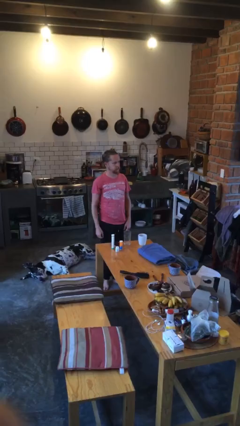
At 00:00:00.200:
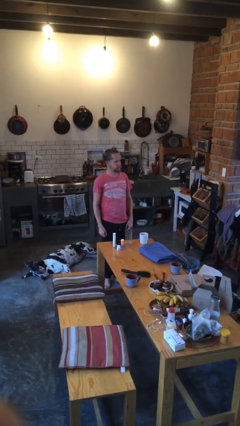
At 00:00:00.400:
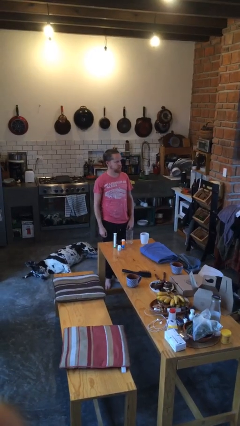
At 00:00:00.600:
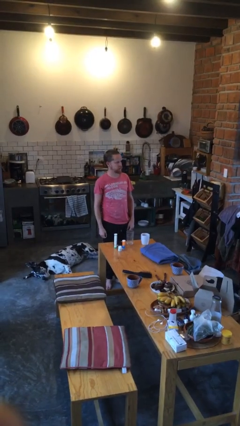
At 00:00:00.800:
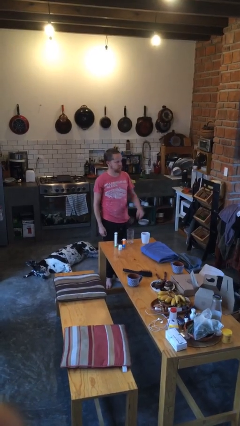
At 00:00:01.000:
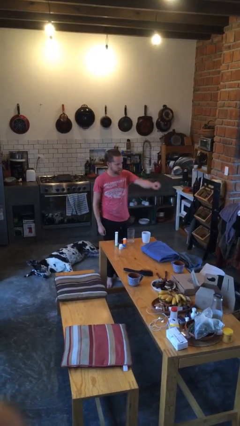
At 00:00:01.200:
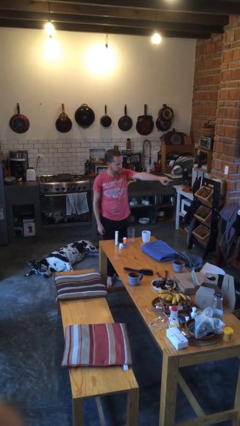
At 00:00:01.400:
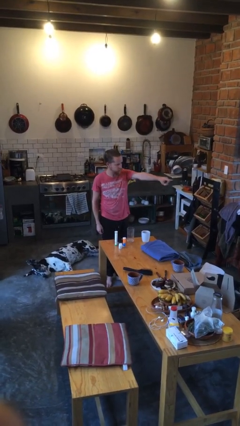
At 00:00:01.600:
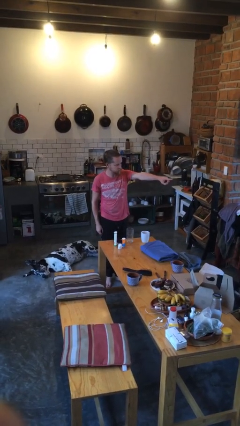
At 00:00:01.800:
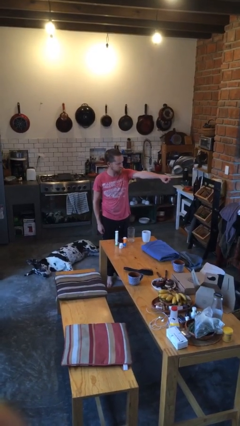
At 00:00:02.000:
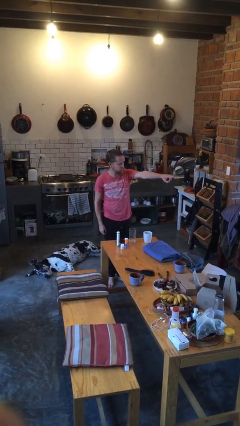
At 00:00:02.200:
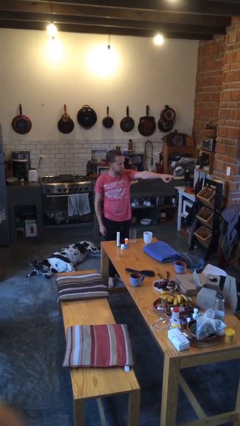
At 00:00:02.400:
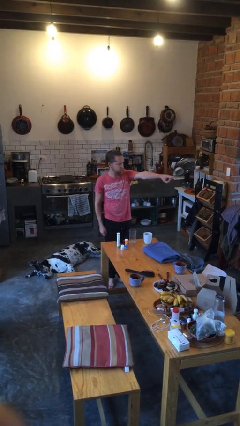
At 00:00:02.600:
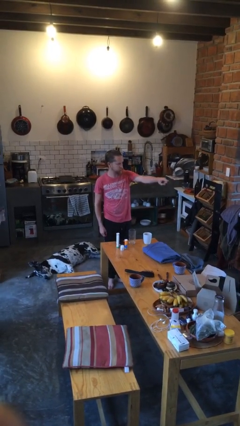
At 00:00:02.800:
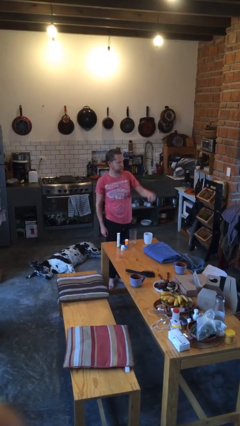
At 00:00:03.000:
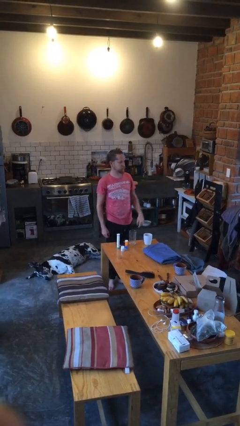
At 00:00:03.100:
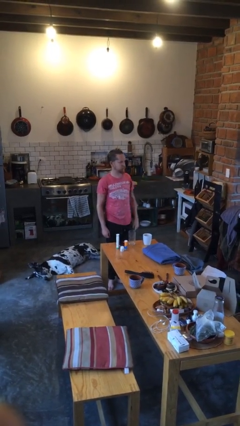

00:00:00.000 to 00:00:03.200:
person points at person

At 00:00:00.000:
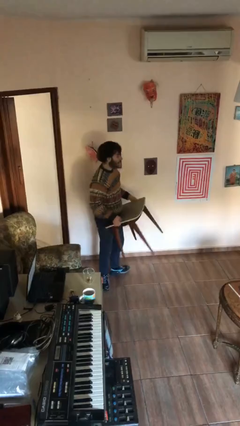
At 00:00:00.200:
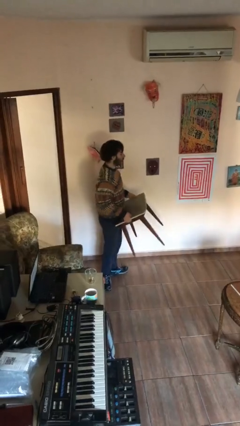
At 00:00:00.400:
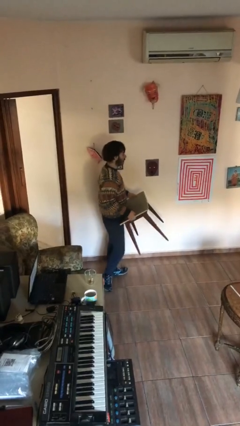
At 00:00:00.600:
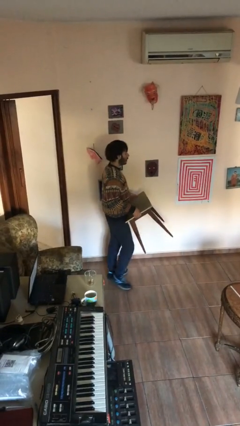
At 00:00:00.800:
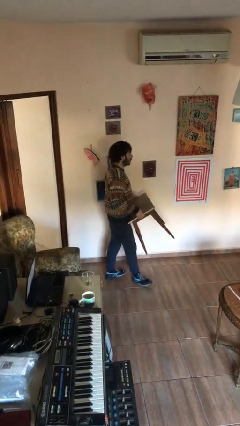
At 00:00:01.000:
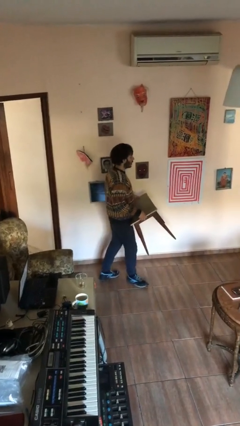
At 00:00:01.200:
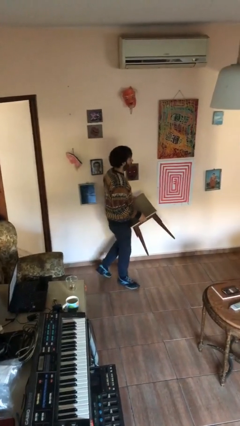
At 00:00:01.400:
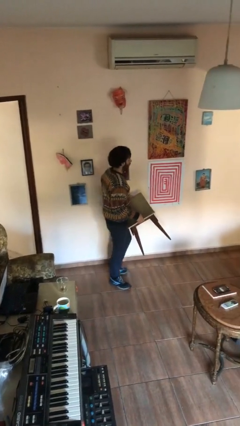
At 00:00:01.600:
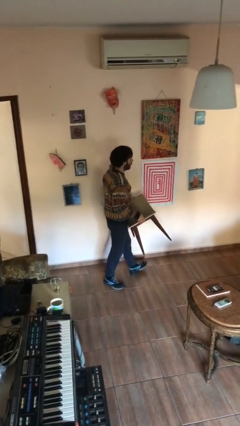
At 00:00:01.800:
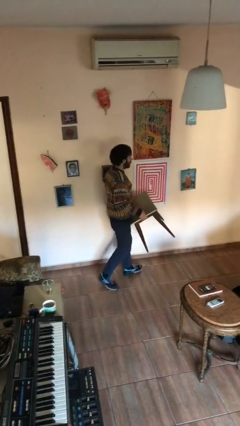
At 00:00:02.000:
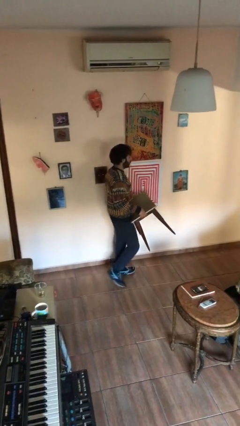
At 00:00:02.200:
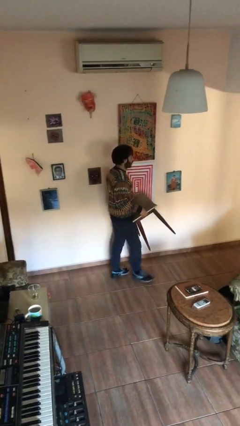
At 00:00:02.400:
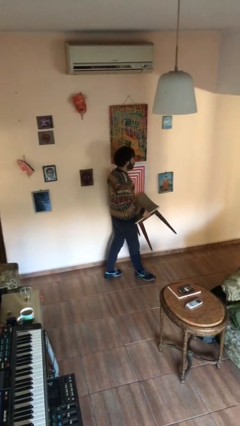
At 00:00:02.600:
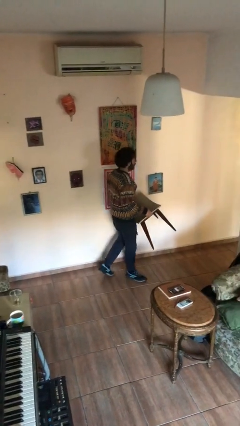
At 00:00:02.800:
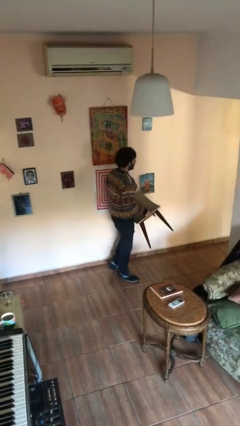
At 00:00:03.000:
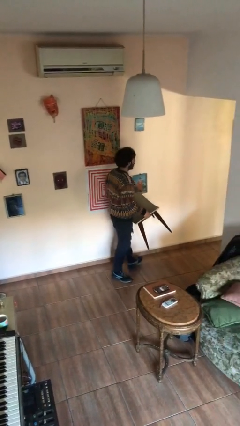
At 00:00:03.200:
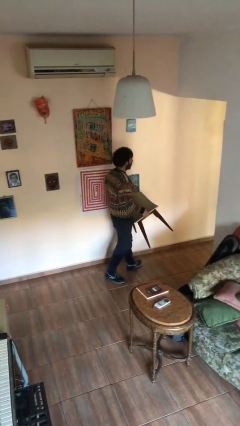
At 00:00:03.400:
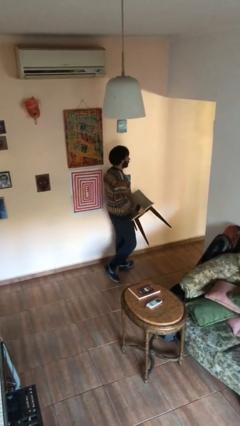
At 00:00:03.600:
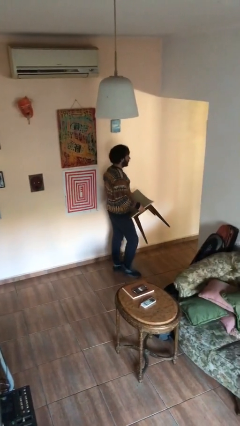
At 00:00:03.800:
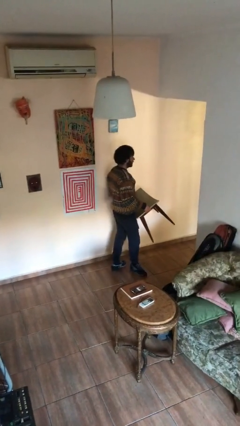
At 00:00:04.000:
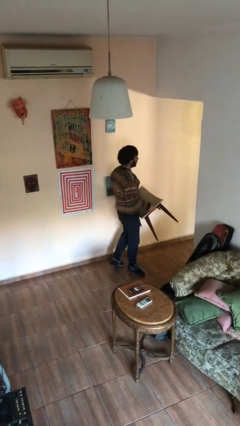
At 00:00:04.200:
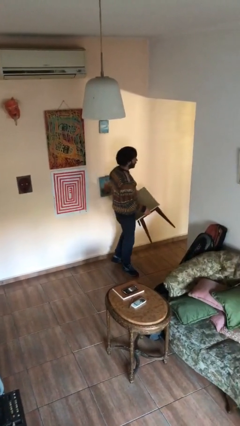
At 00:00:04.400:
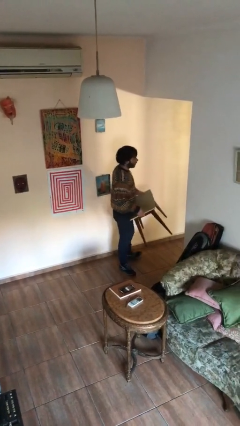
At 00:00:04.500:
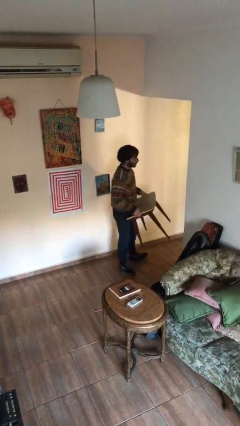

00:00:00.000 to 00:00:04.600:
person carries furniture

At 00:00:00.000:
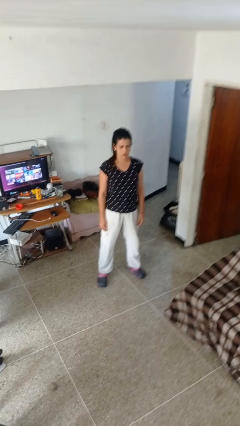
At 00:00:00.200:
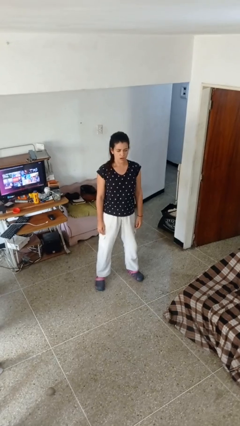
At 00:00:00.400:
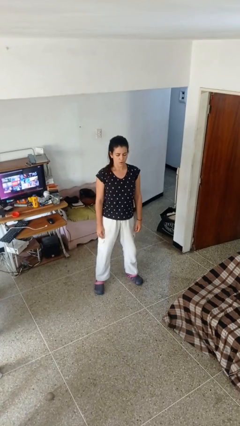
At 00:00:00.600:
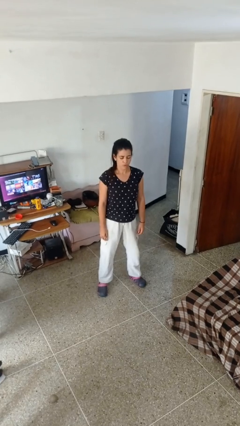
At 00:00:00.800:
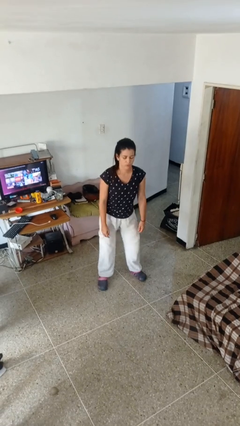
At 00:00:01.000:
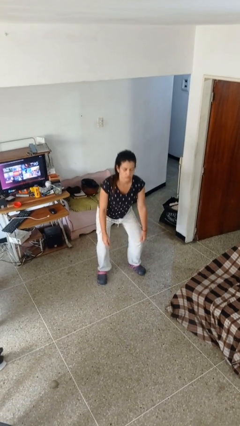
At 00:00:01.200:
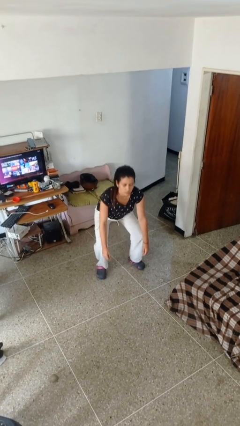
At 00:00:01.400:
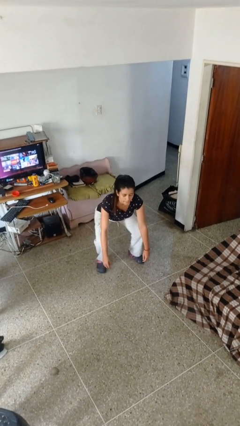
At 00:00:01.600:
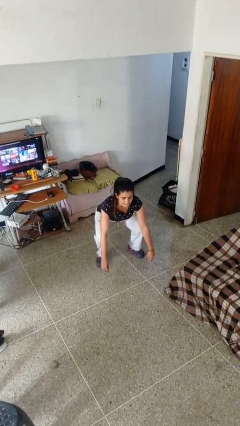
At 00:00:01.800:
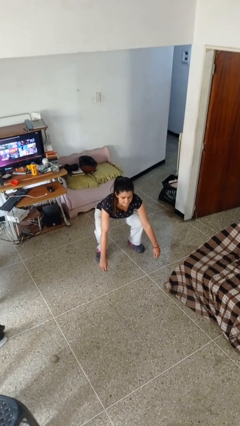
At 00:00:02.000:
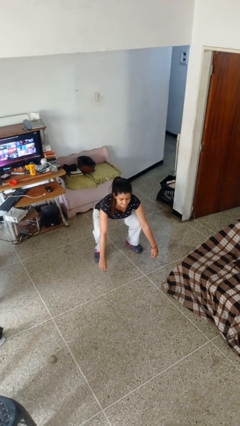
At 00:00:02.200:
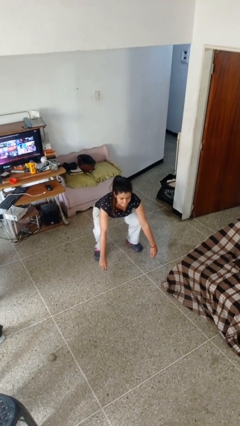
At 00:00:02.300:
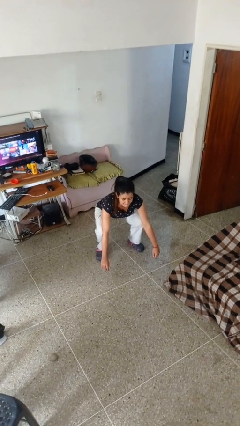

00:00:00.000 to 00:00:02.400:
person squats

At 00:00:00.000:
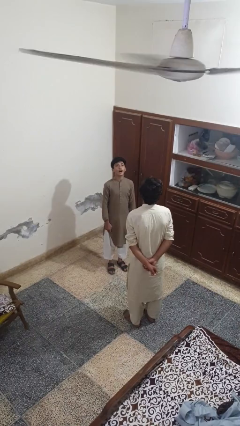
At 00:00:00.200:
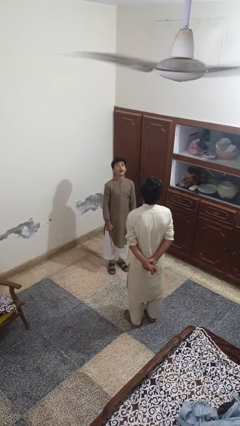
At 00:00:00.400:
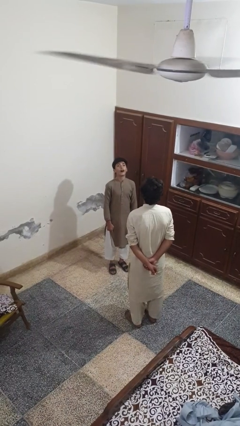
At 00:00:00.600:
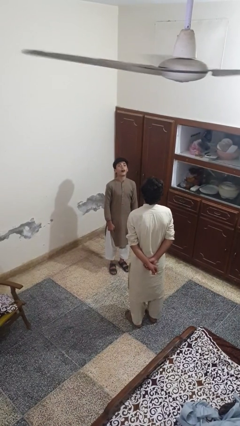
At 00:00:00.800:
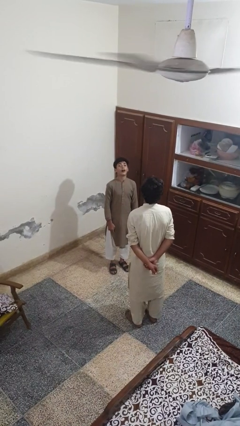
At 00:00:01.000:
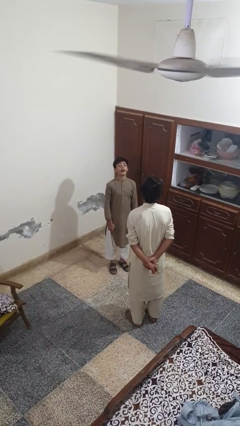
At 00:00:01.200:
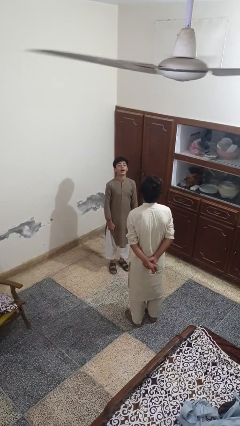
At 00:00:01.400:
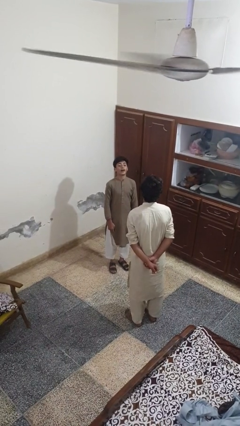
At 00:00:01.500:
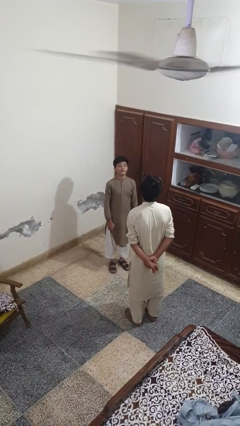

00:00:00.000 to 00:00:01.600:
person laughs with person

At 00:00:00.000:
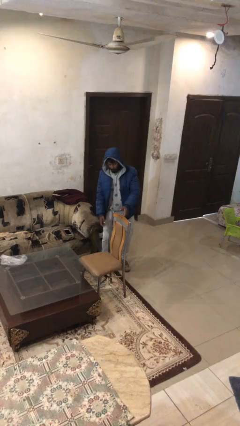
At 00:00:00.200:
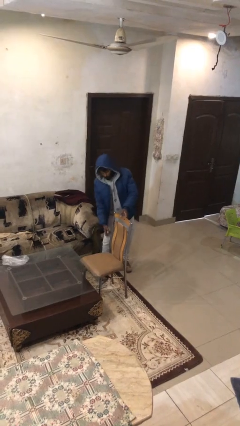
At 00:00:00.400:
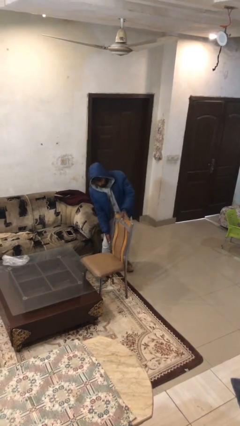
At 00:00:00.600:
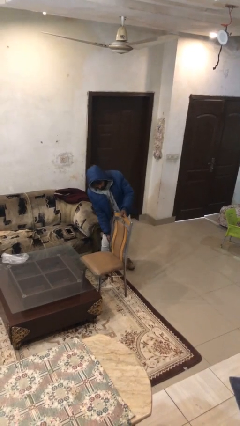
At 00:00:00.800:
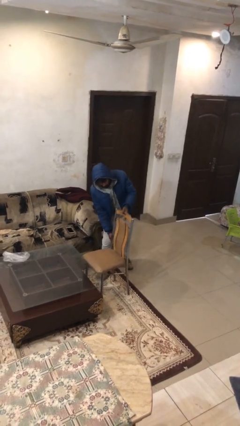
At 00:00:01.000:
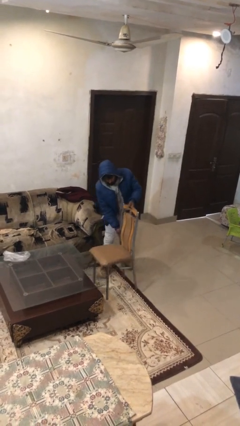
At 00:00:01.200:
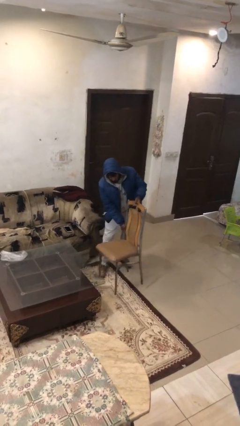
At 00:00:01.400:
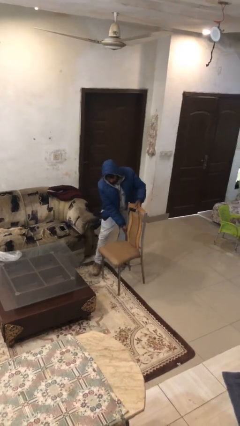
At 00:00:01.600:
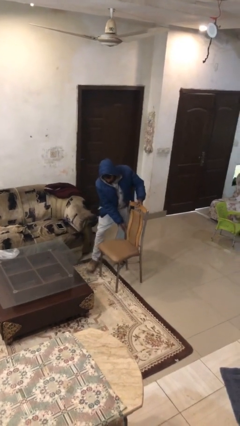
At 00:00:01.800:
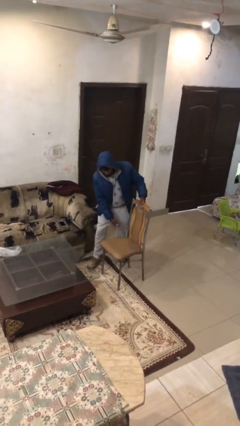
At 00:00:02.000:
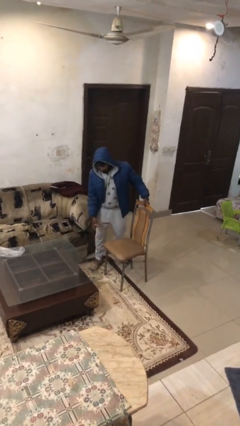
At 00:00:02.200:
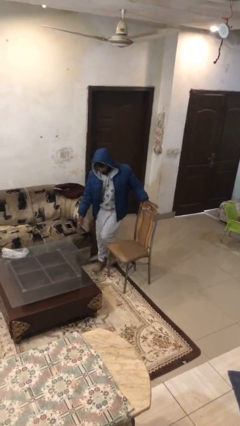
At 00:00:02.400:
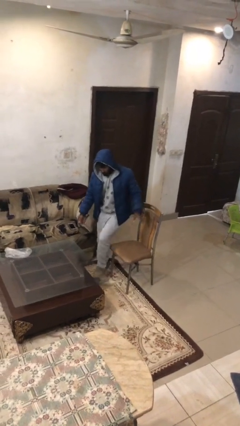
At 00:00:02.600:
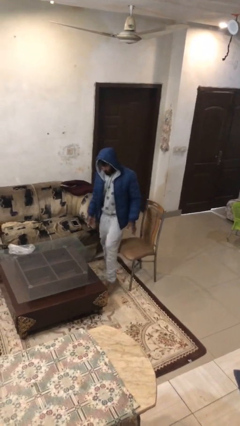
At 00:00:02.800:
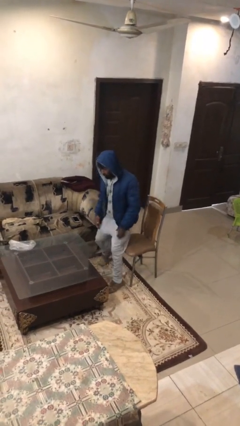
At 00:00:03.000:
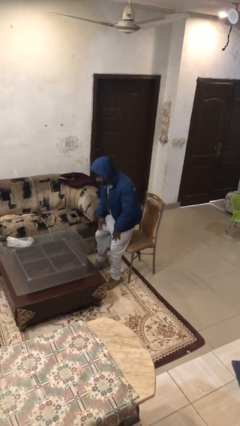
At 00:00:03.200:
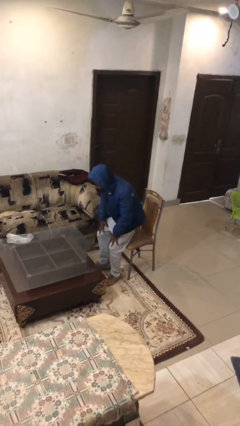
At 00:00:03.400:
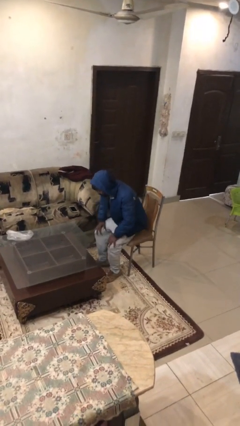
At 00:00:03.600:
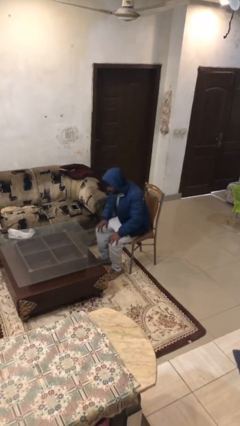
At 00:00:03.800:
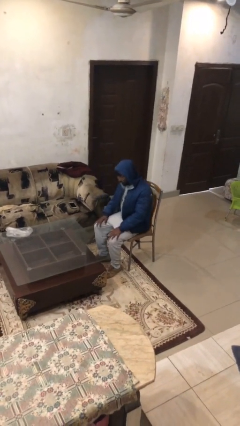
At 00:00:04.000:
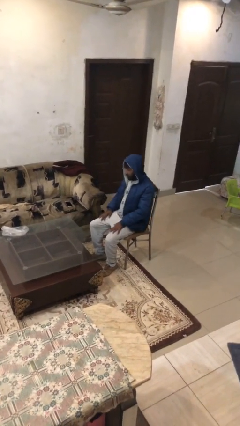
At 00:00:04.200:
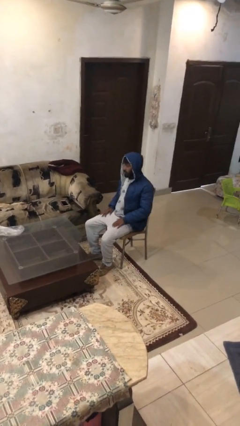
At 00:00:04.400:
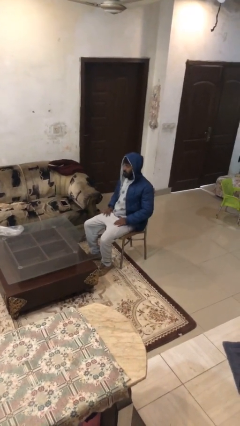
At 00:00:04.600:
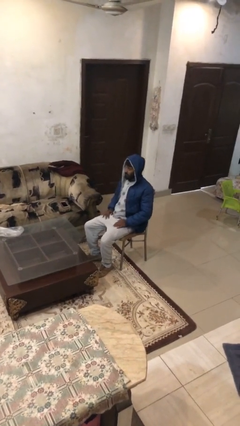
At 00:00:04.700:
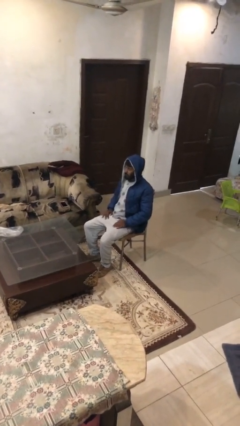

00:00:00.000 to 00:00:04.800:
person sits down

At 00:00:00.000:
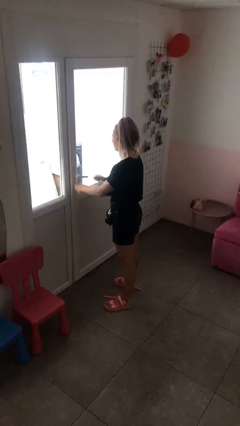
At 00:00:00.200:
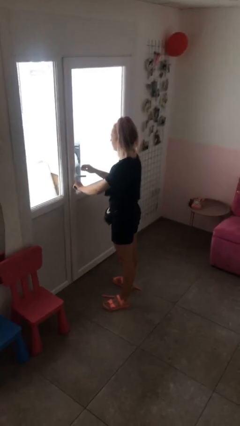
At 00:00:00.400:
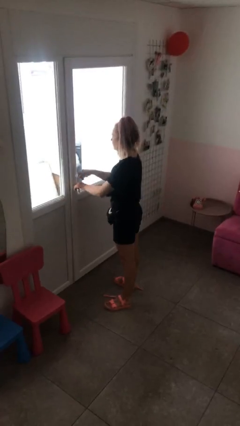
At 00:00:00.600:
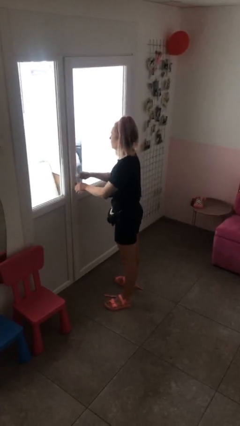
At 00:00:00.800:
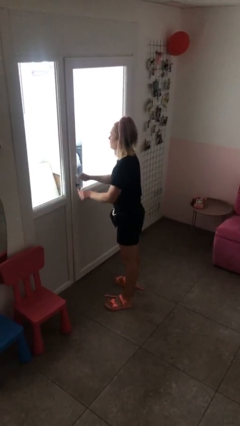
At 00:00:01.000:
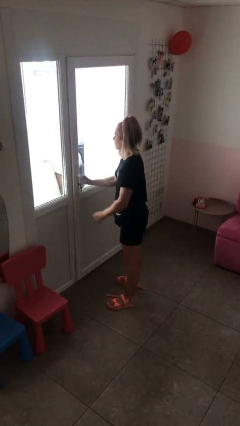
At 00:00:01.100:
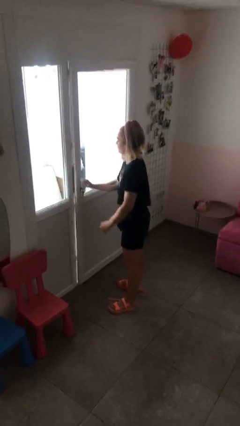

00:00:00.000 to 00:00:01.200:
person unlocks door with keys
